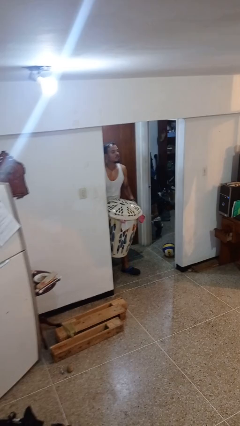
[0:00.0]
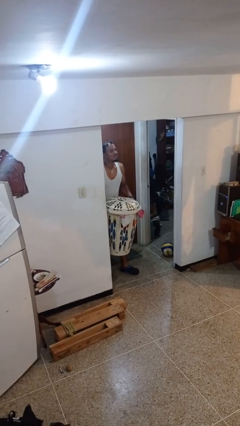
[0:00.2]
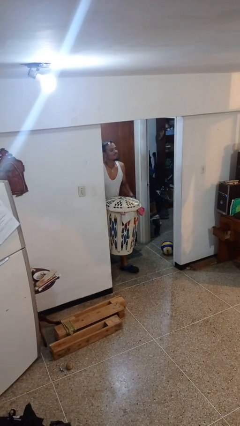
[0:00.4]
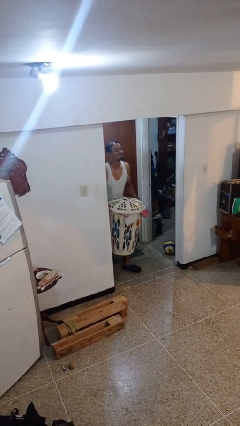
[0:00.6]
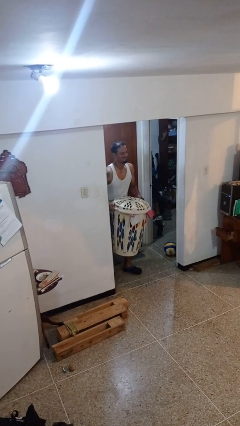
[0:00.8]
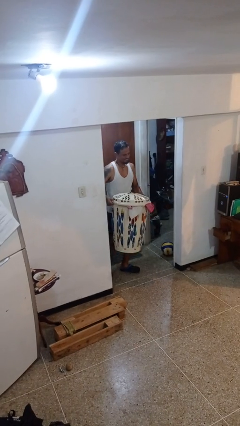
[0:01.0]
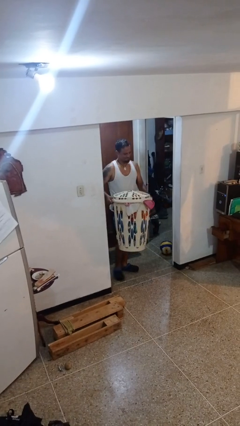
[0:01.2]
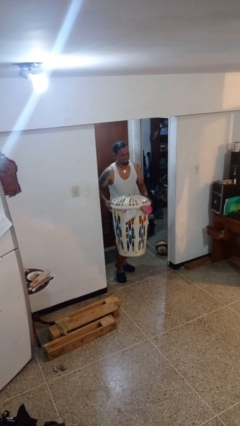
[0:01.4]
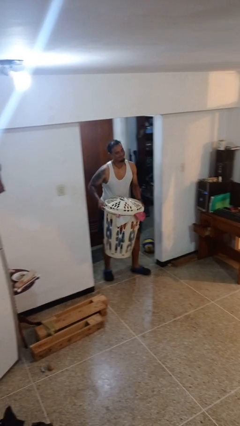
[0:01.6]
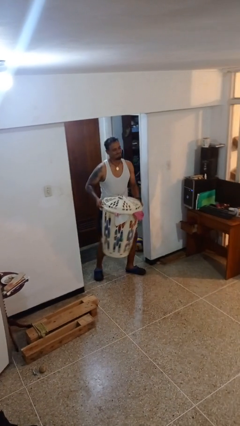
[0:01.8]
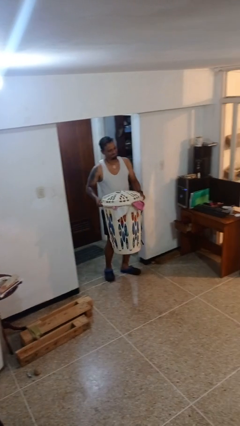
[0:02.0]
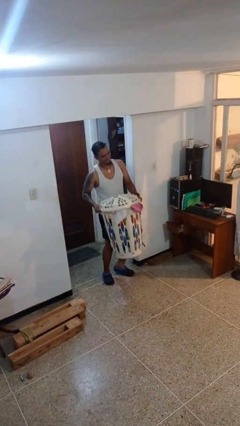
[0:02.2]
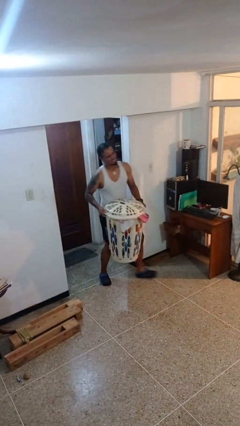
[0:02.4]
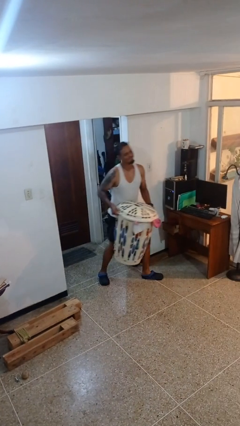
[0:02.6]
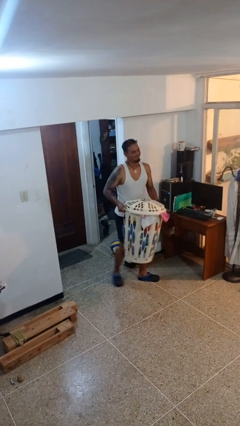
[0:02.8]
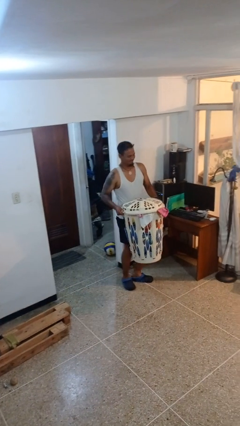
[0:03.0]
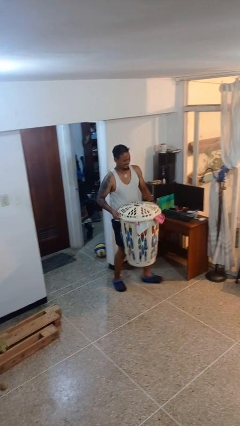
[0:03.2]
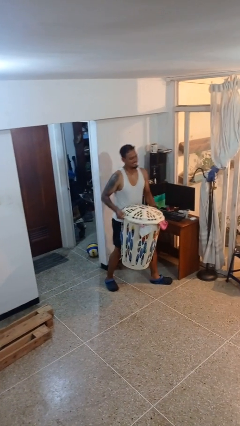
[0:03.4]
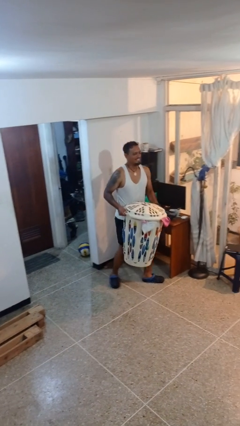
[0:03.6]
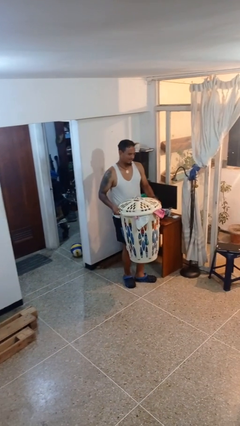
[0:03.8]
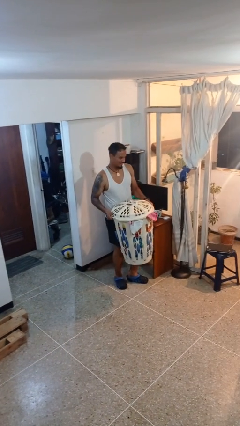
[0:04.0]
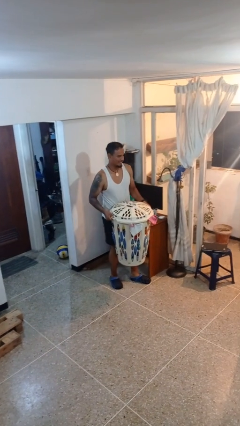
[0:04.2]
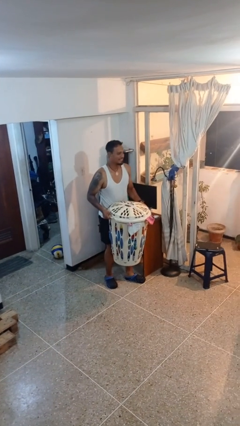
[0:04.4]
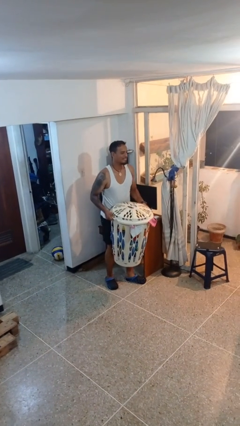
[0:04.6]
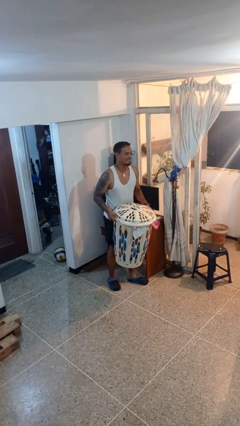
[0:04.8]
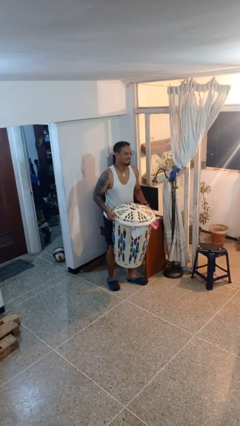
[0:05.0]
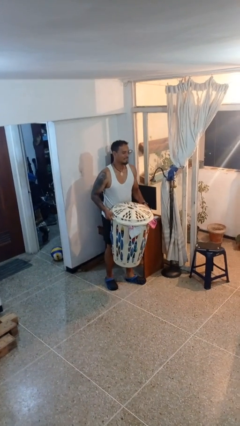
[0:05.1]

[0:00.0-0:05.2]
person carries laundry basket

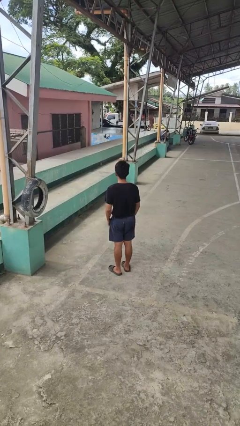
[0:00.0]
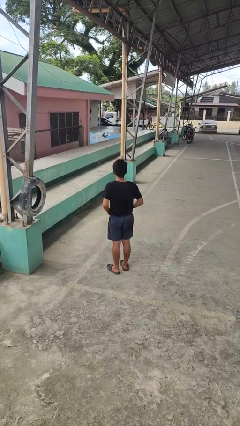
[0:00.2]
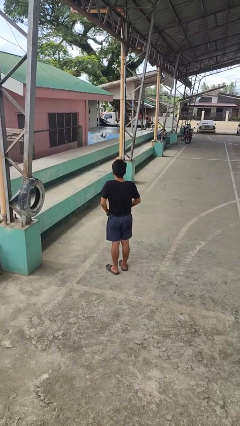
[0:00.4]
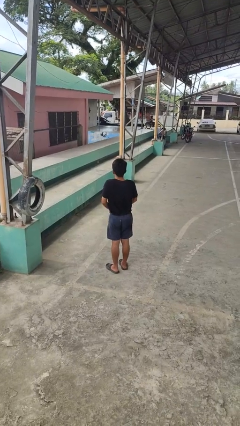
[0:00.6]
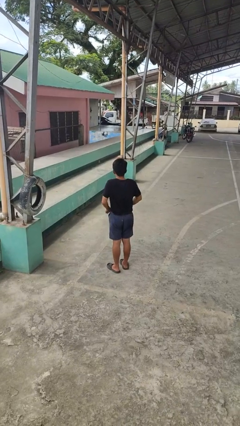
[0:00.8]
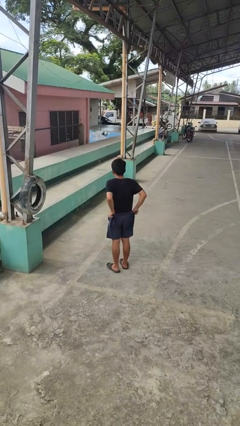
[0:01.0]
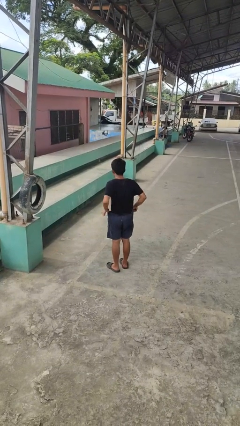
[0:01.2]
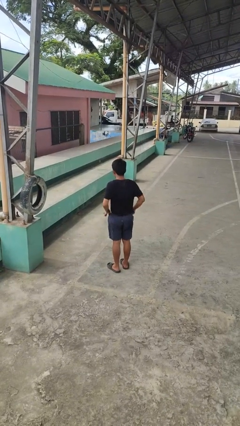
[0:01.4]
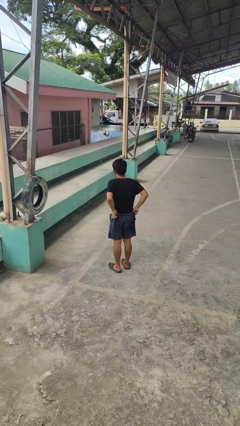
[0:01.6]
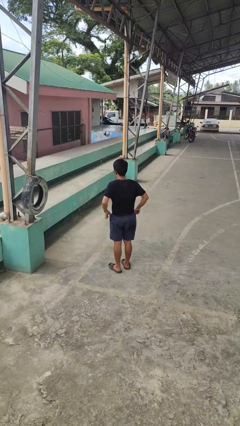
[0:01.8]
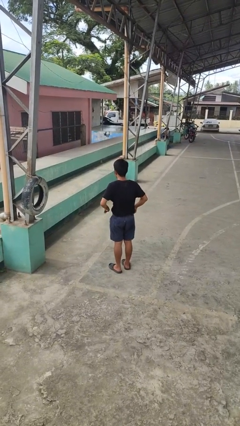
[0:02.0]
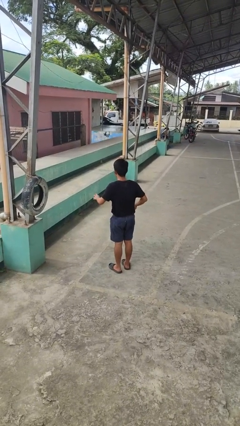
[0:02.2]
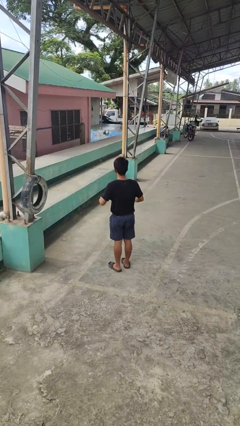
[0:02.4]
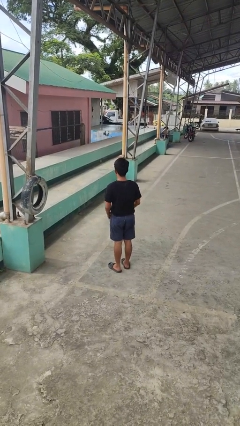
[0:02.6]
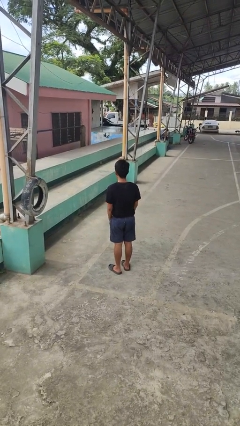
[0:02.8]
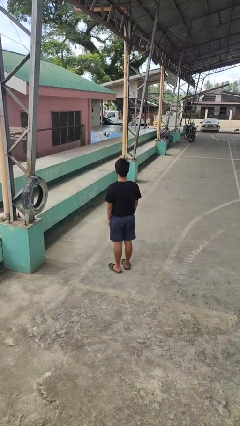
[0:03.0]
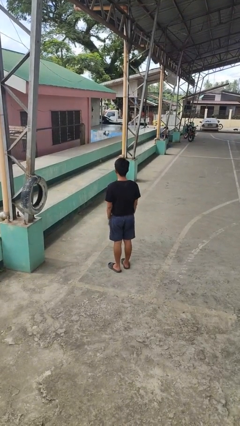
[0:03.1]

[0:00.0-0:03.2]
person hikes up pants

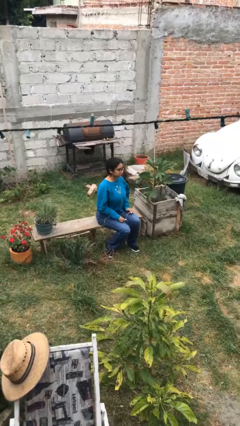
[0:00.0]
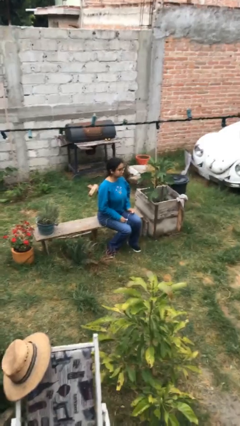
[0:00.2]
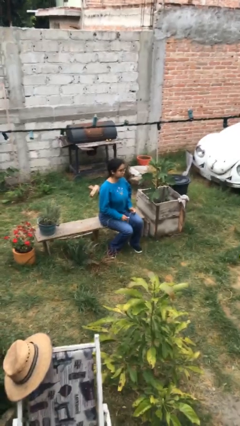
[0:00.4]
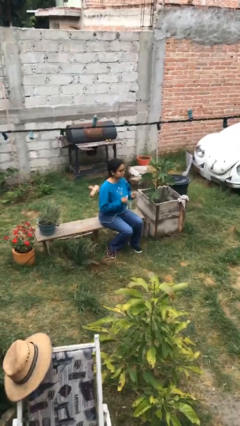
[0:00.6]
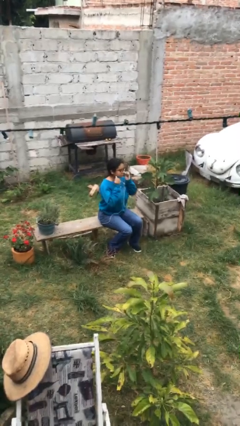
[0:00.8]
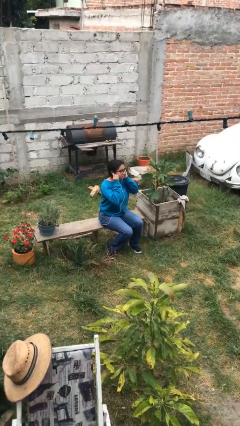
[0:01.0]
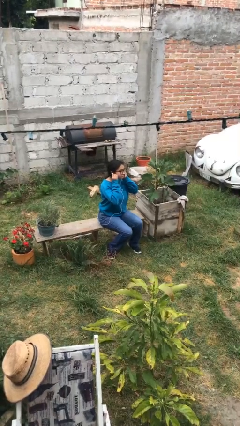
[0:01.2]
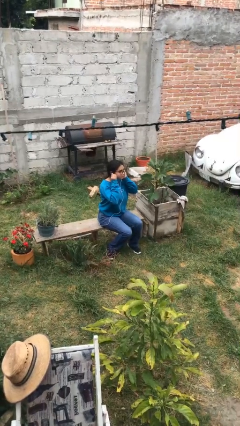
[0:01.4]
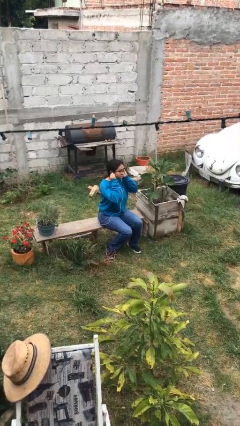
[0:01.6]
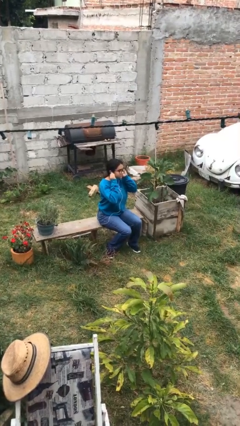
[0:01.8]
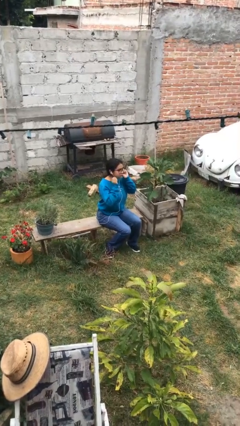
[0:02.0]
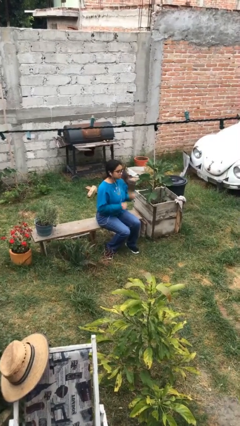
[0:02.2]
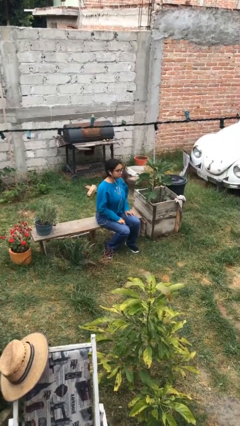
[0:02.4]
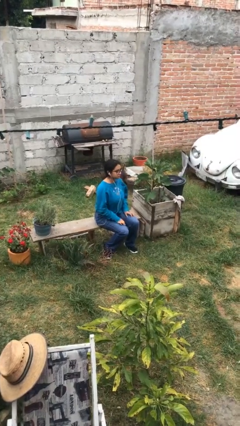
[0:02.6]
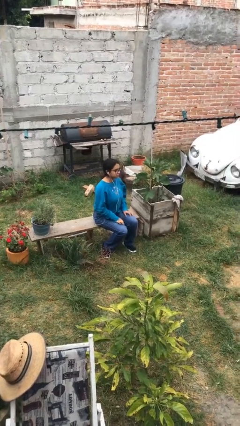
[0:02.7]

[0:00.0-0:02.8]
person puts on headphones

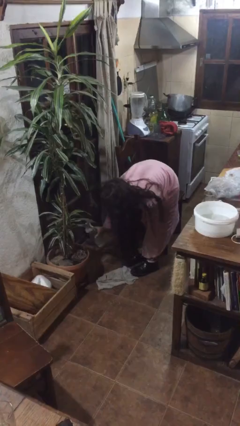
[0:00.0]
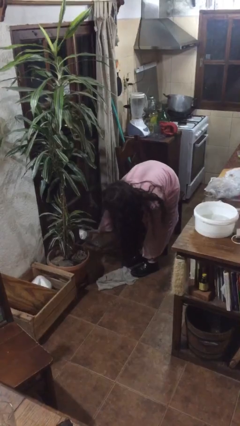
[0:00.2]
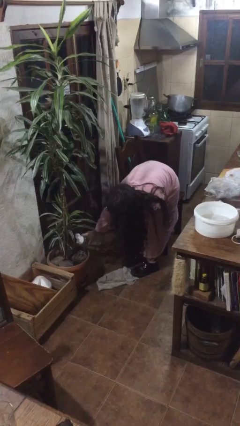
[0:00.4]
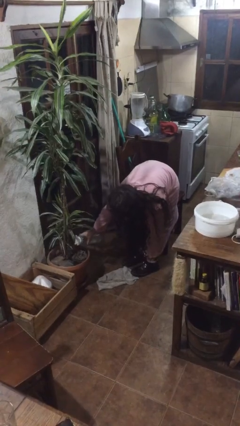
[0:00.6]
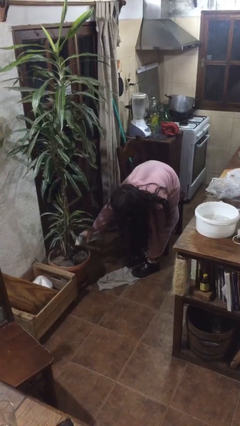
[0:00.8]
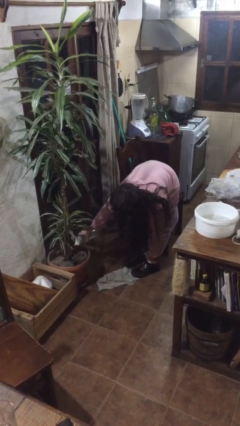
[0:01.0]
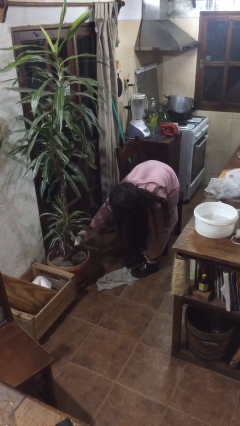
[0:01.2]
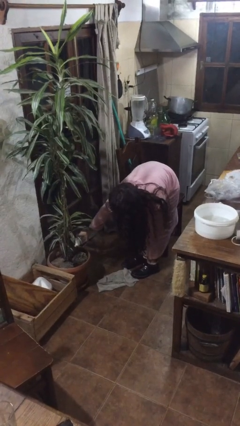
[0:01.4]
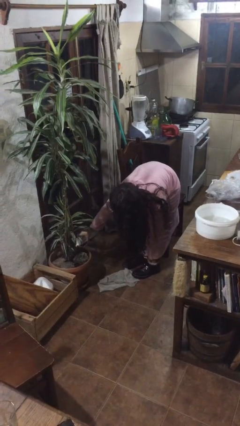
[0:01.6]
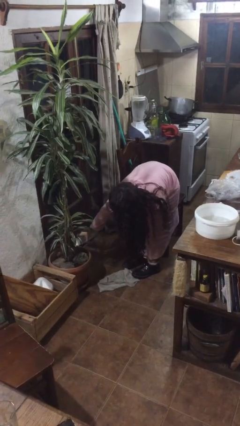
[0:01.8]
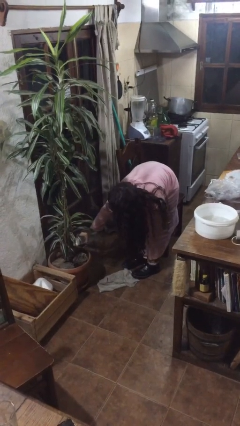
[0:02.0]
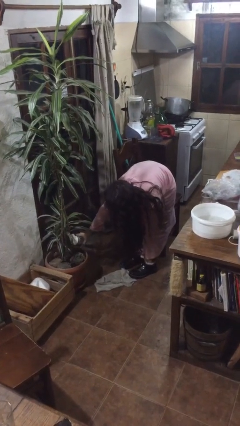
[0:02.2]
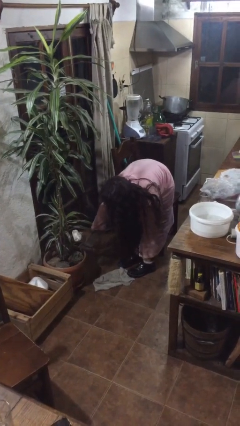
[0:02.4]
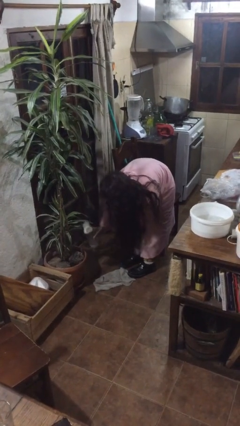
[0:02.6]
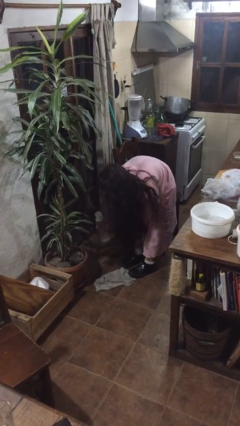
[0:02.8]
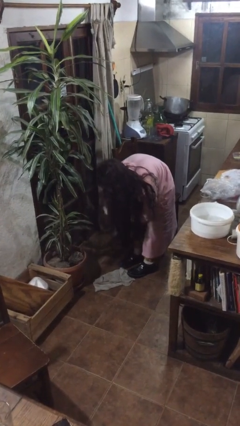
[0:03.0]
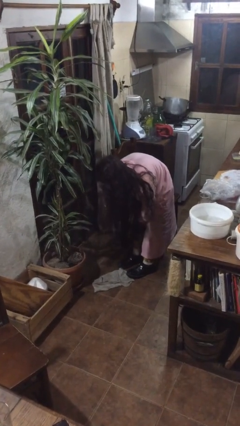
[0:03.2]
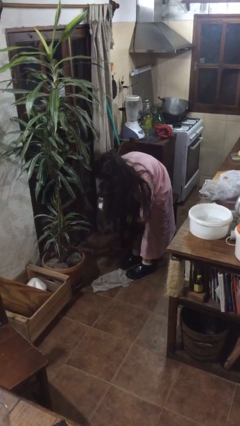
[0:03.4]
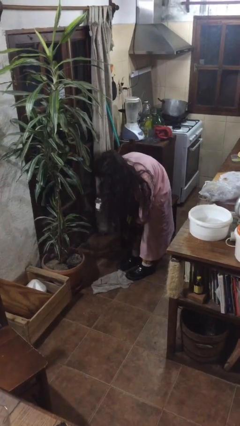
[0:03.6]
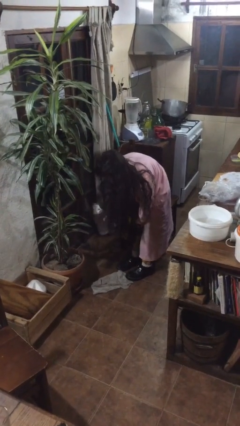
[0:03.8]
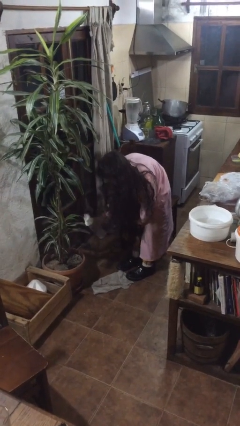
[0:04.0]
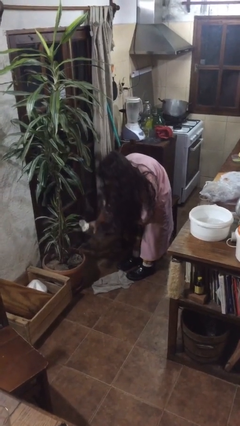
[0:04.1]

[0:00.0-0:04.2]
person waters houseplant

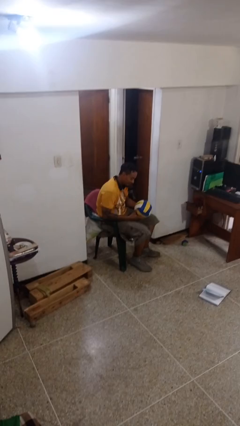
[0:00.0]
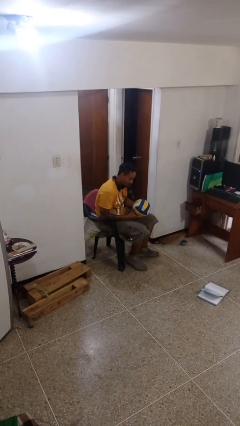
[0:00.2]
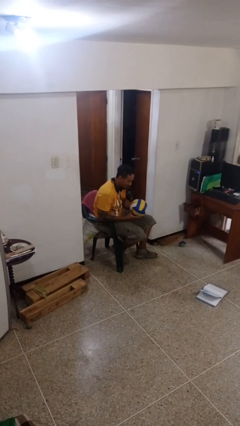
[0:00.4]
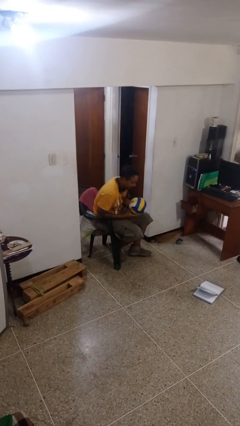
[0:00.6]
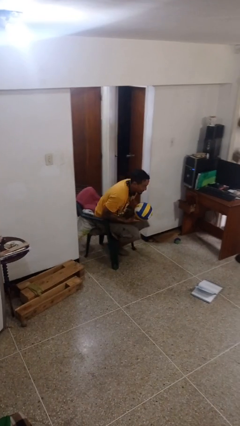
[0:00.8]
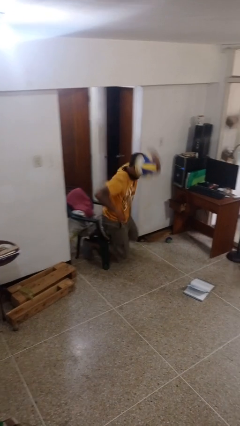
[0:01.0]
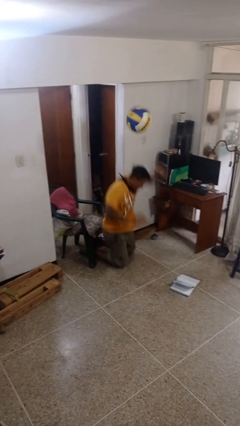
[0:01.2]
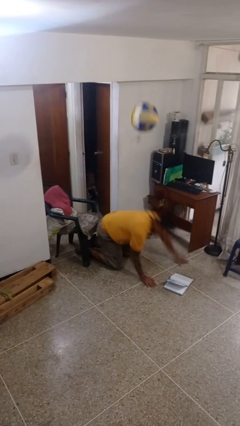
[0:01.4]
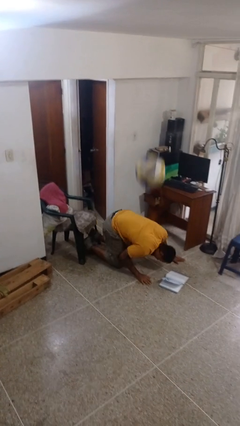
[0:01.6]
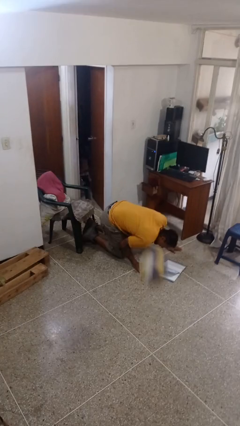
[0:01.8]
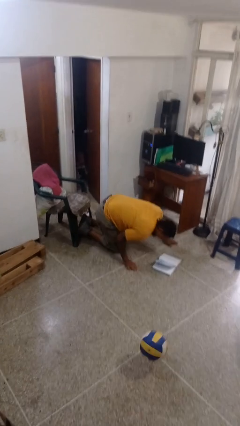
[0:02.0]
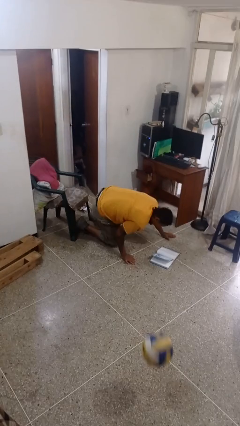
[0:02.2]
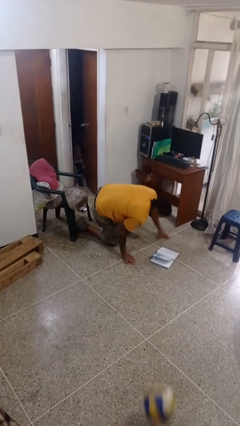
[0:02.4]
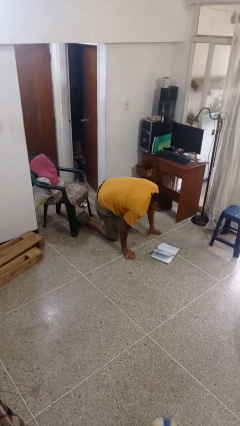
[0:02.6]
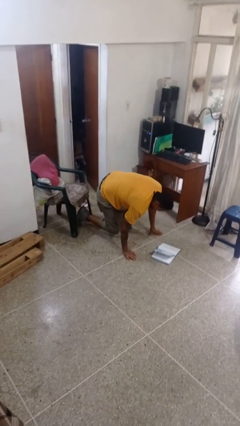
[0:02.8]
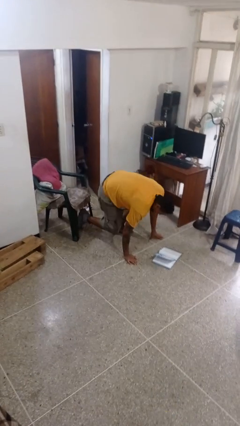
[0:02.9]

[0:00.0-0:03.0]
person falls from chair
